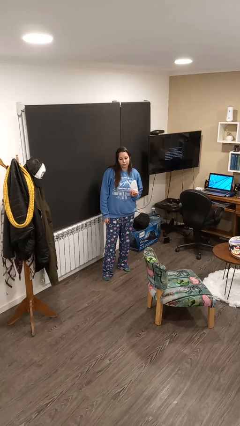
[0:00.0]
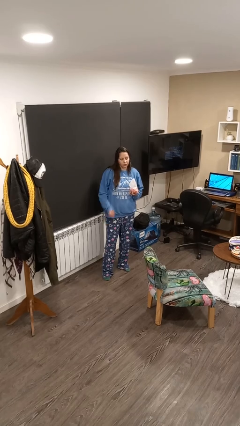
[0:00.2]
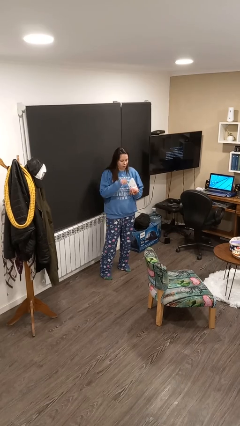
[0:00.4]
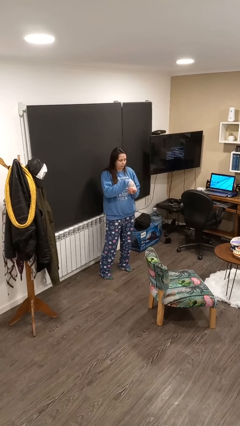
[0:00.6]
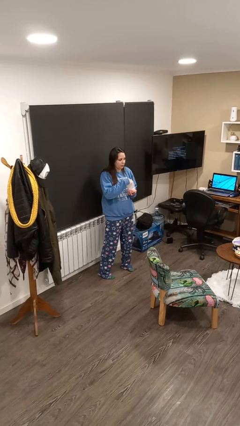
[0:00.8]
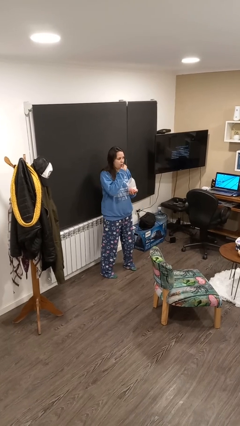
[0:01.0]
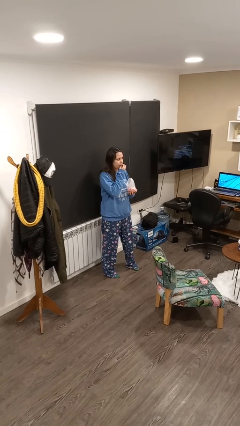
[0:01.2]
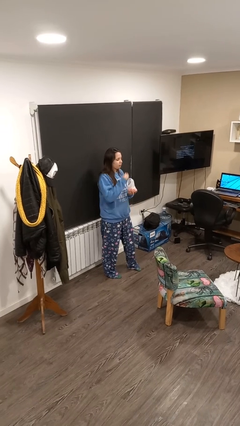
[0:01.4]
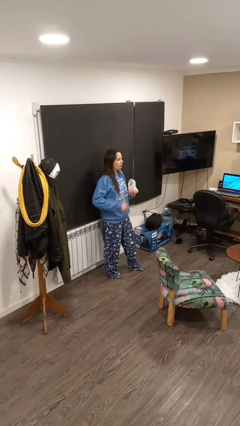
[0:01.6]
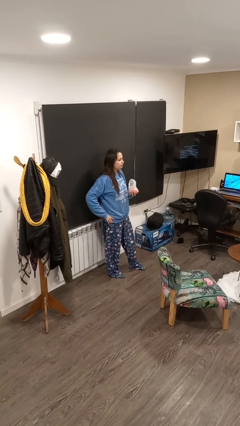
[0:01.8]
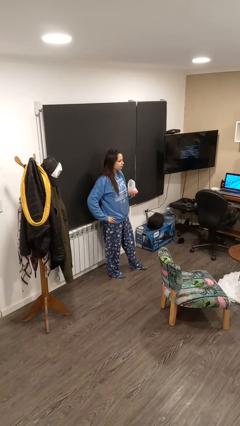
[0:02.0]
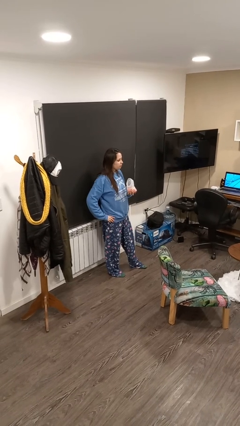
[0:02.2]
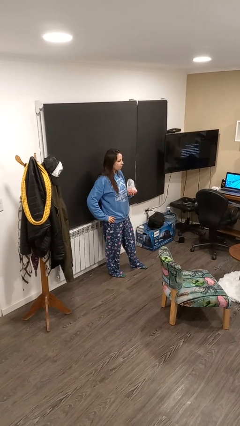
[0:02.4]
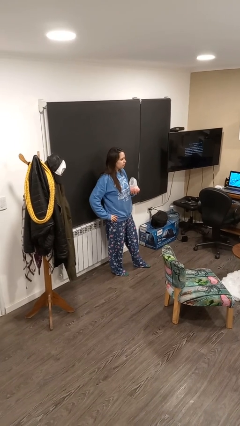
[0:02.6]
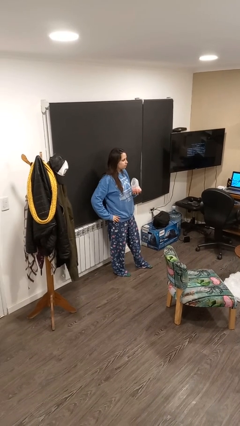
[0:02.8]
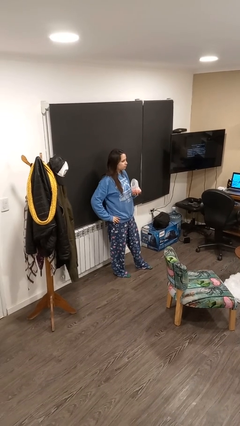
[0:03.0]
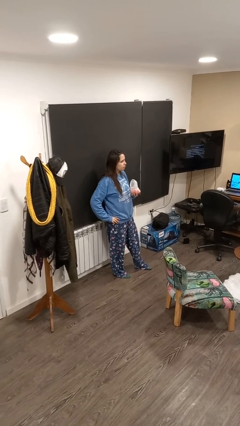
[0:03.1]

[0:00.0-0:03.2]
person eats snack from bag

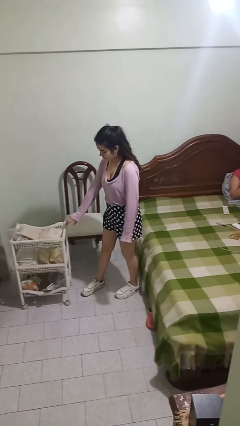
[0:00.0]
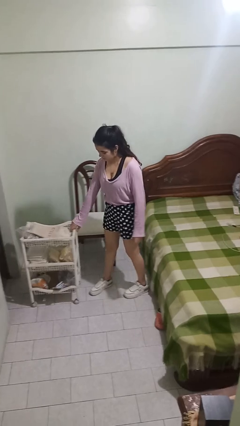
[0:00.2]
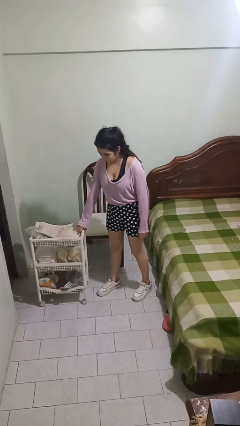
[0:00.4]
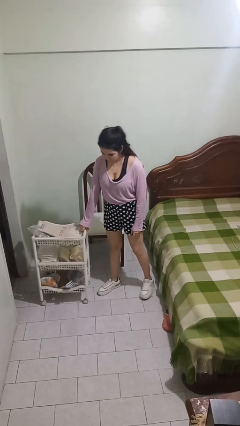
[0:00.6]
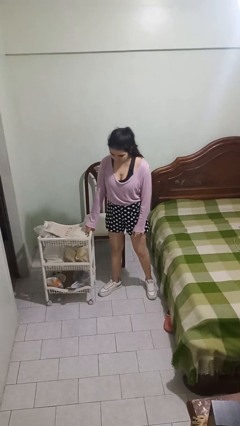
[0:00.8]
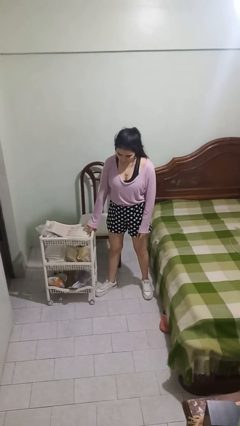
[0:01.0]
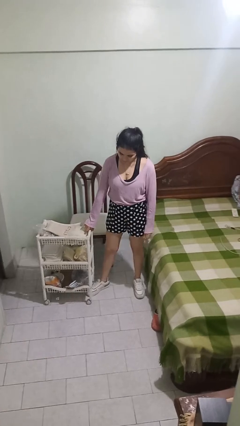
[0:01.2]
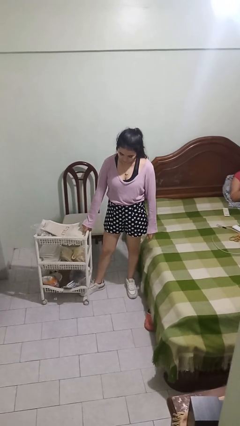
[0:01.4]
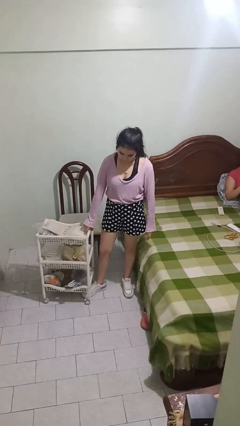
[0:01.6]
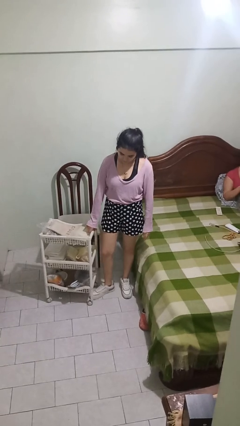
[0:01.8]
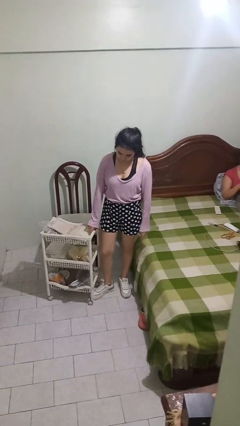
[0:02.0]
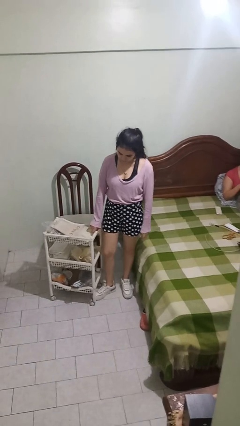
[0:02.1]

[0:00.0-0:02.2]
person pulls wheeled cart

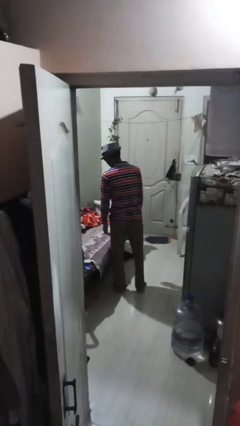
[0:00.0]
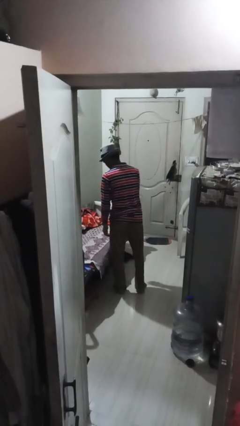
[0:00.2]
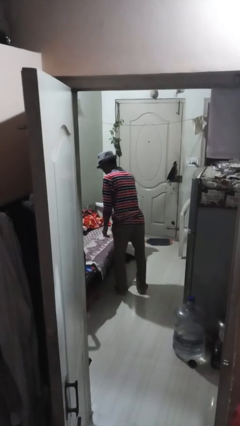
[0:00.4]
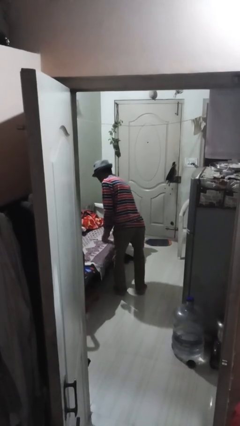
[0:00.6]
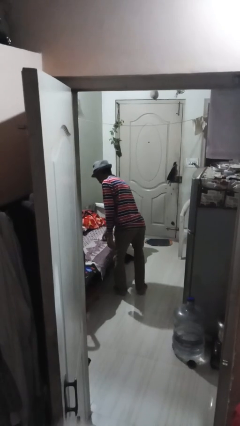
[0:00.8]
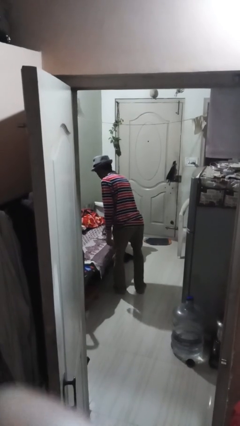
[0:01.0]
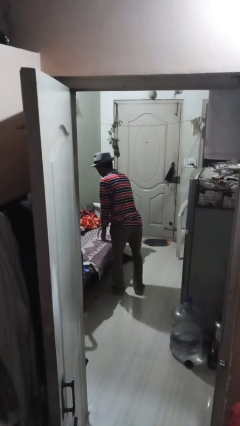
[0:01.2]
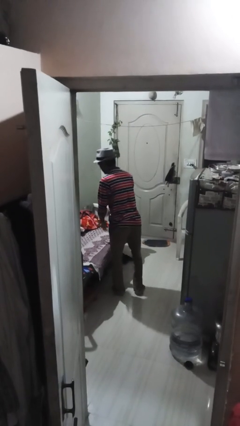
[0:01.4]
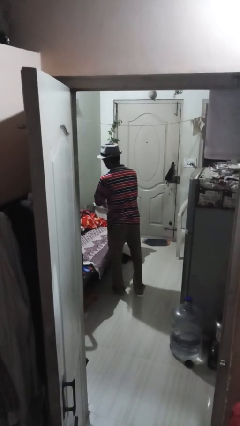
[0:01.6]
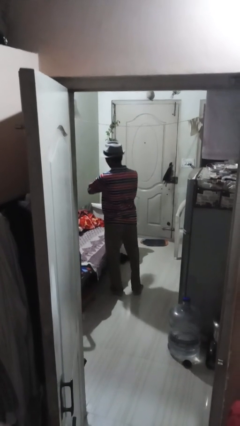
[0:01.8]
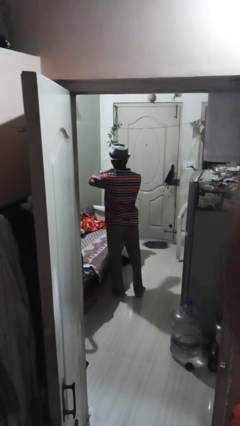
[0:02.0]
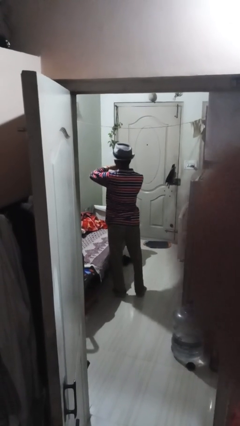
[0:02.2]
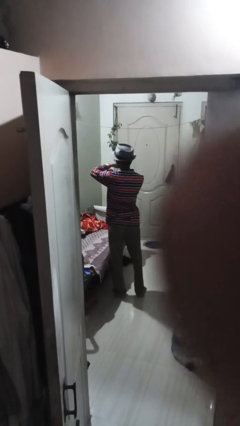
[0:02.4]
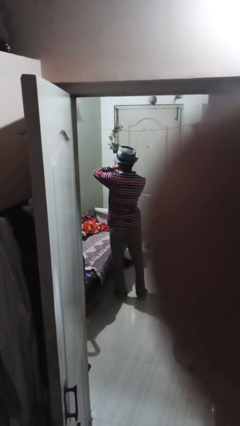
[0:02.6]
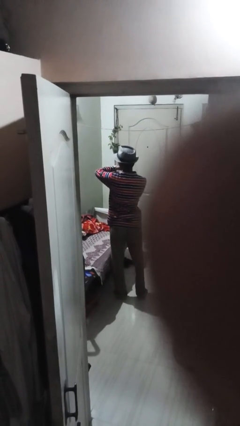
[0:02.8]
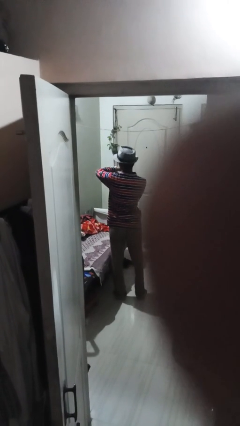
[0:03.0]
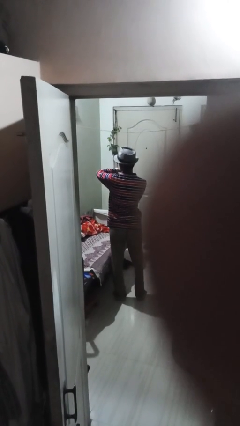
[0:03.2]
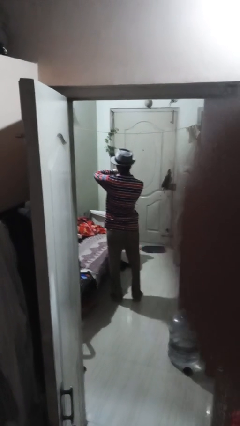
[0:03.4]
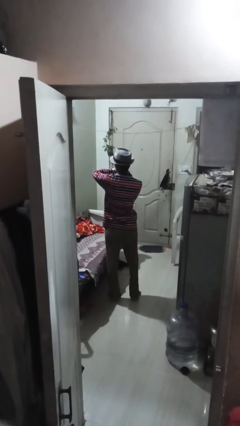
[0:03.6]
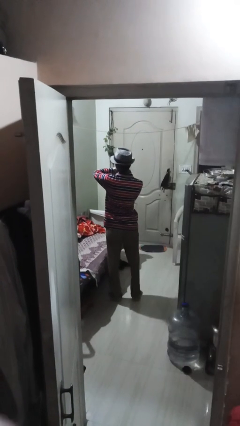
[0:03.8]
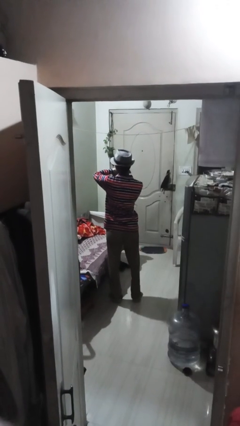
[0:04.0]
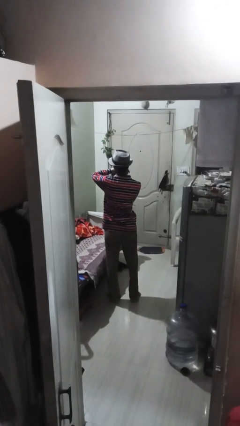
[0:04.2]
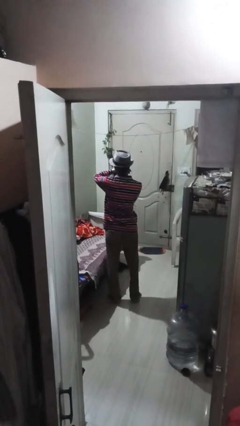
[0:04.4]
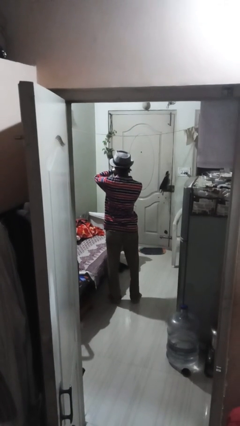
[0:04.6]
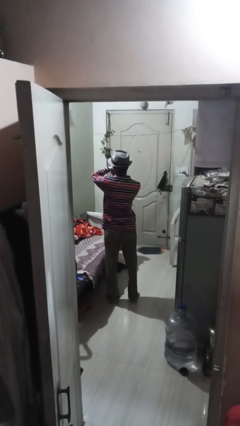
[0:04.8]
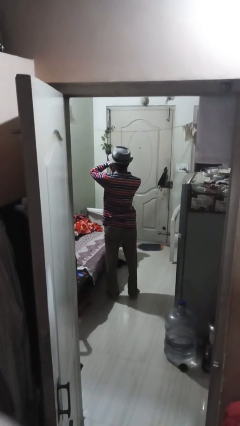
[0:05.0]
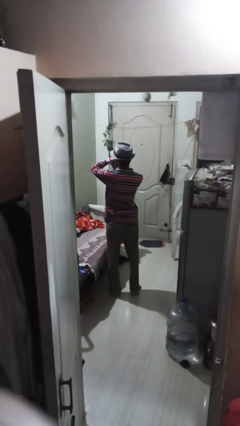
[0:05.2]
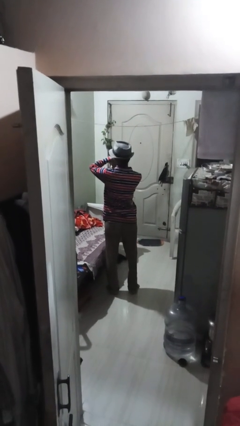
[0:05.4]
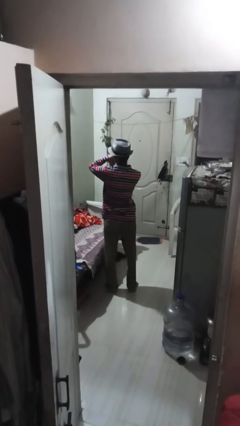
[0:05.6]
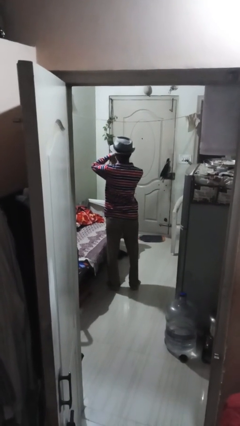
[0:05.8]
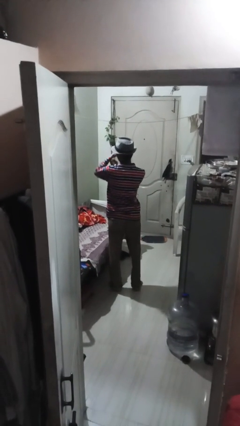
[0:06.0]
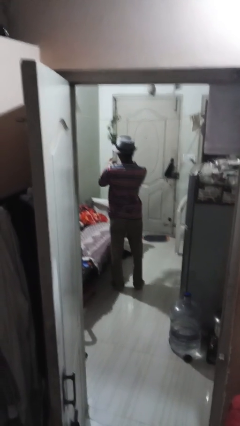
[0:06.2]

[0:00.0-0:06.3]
person puts on wristwatch

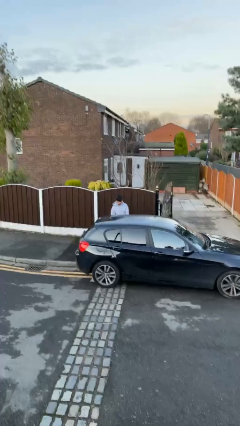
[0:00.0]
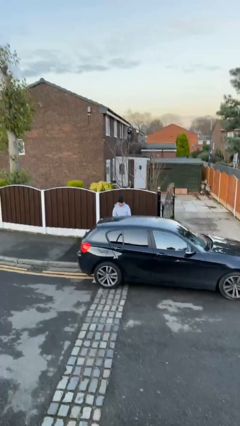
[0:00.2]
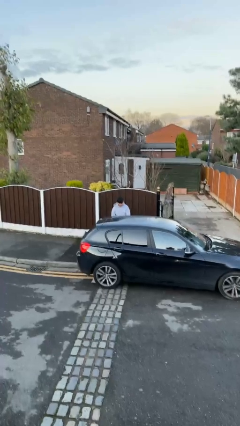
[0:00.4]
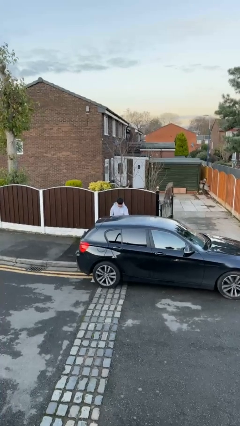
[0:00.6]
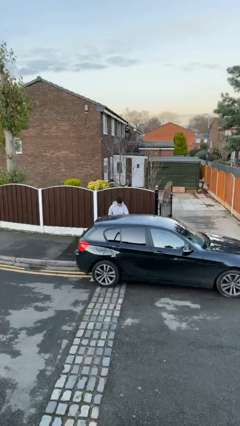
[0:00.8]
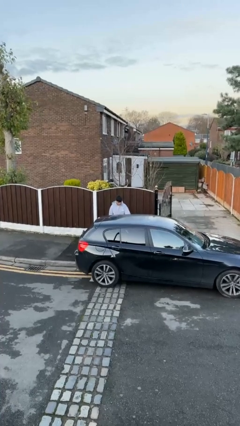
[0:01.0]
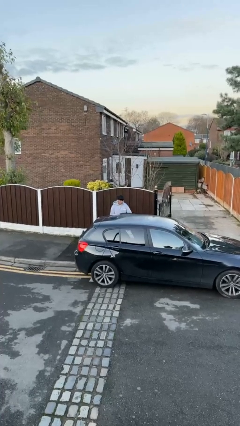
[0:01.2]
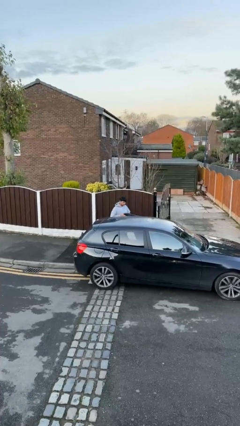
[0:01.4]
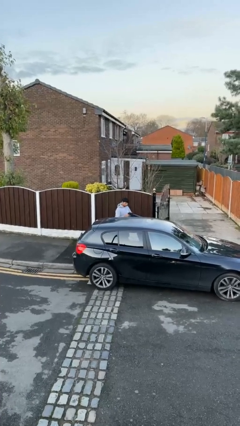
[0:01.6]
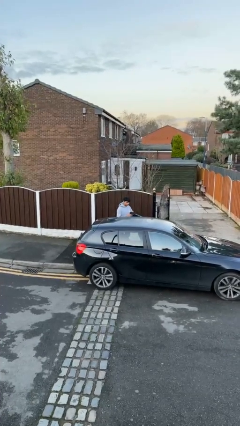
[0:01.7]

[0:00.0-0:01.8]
person opens car door

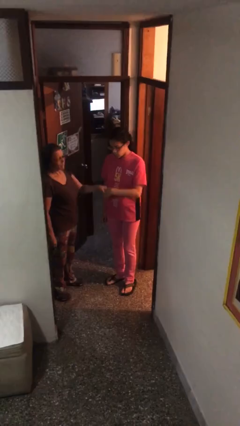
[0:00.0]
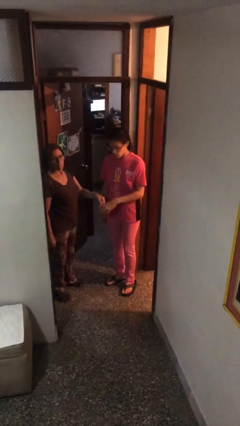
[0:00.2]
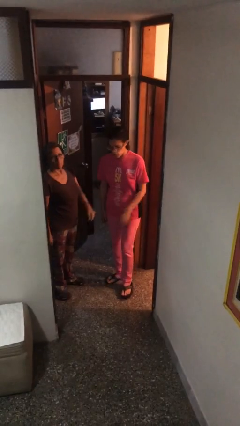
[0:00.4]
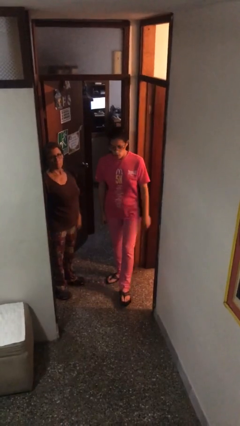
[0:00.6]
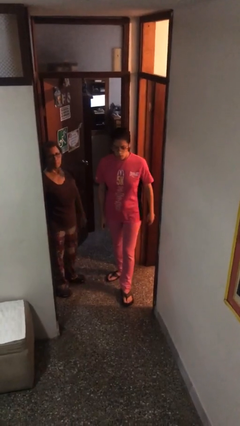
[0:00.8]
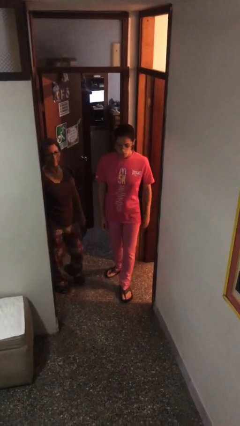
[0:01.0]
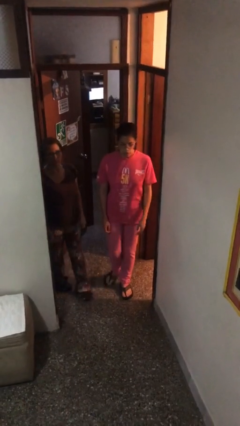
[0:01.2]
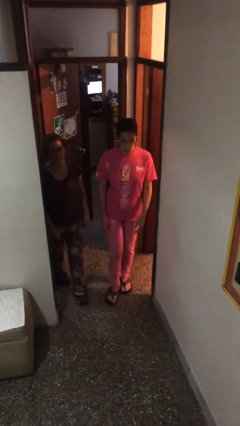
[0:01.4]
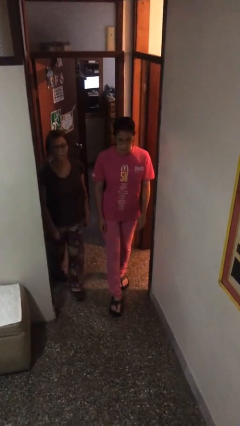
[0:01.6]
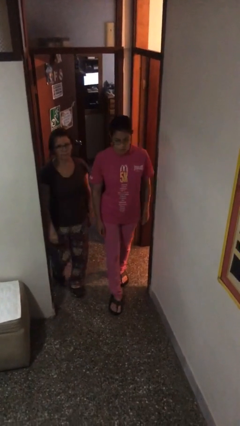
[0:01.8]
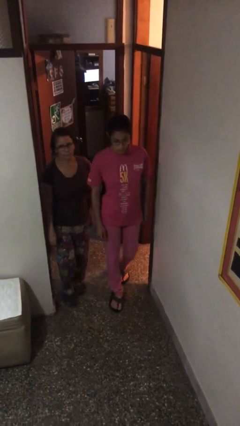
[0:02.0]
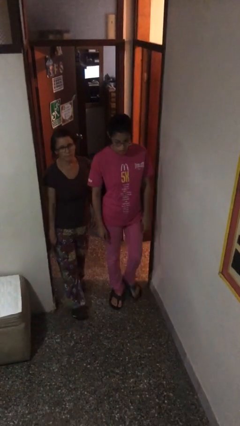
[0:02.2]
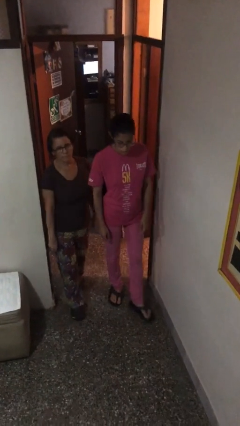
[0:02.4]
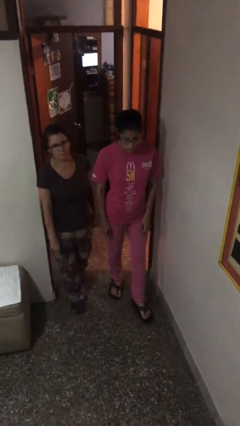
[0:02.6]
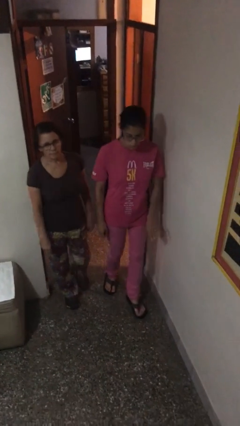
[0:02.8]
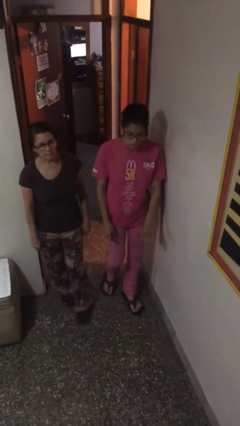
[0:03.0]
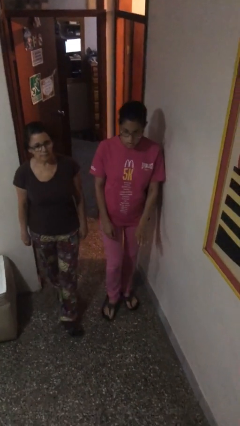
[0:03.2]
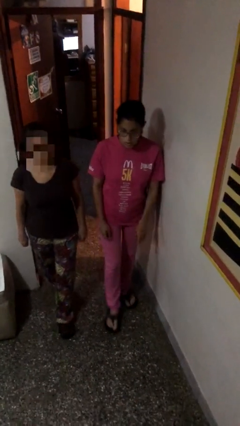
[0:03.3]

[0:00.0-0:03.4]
person talks to person

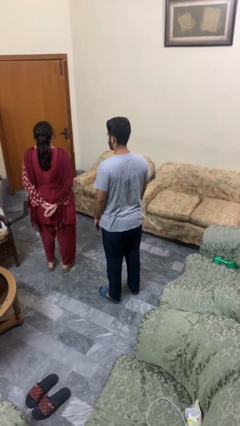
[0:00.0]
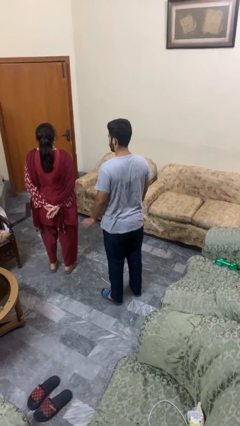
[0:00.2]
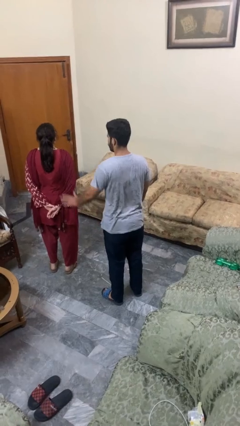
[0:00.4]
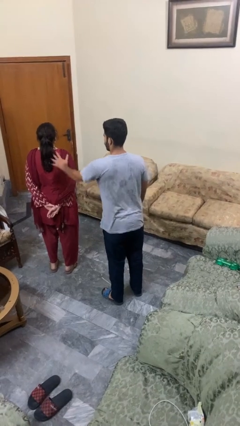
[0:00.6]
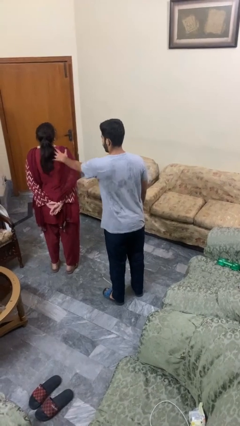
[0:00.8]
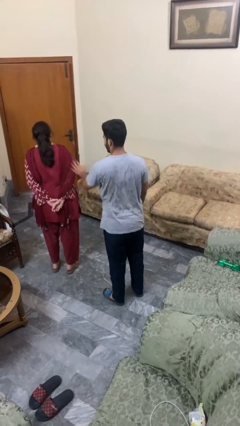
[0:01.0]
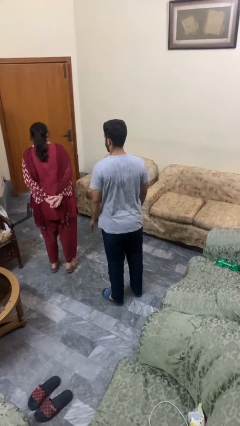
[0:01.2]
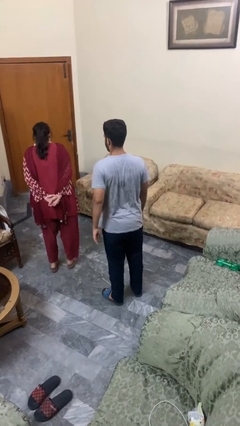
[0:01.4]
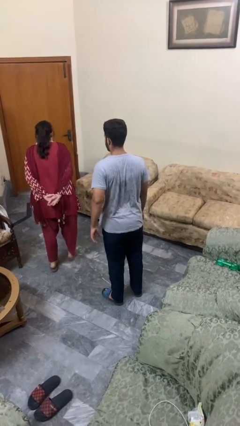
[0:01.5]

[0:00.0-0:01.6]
person shoves person
